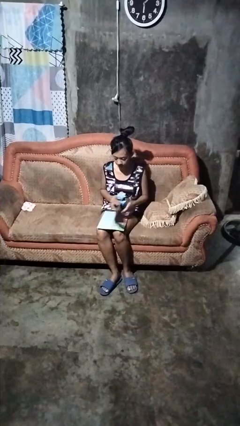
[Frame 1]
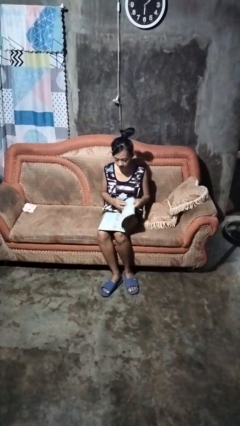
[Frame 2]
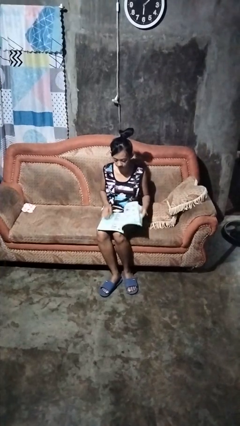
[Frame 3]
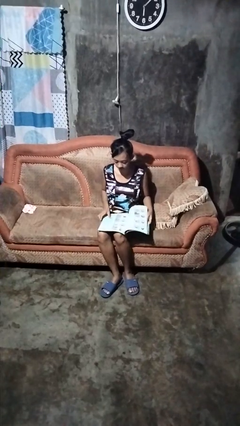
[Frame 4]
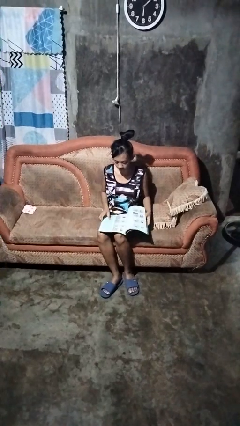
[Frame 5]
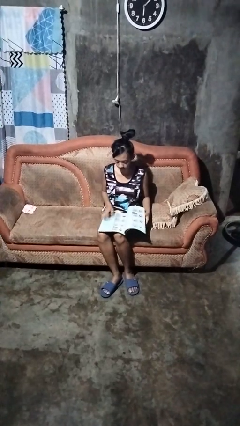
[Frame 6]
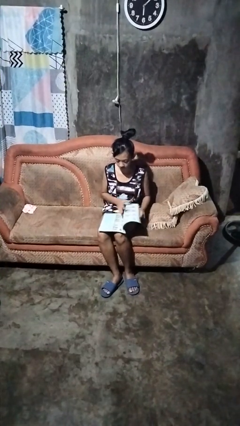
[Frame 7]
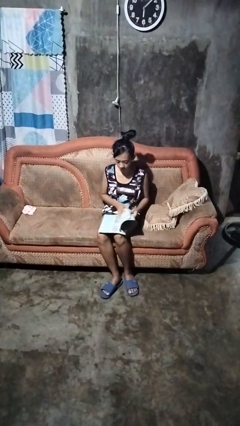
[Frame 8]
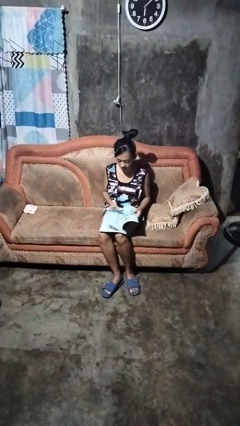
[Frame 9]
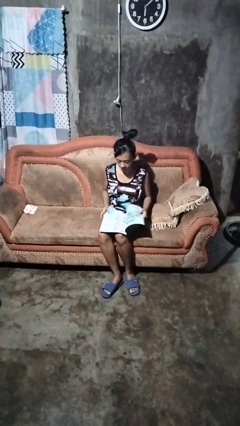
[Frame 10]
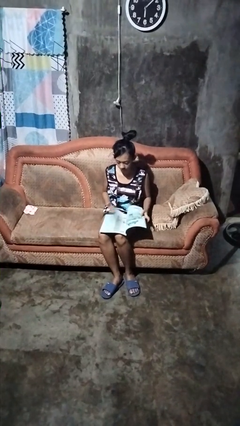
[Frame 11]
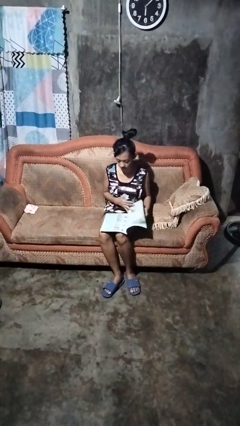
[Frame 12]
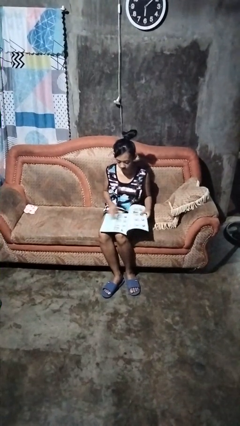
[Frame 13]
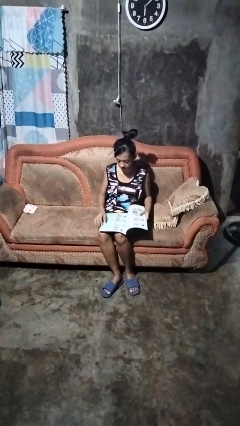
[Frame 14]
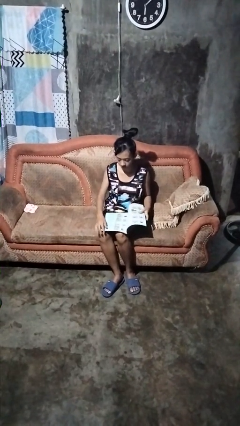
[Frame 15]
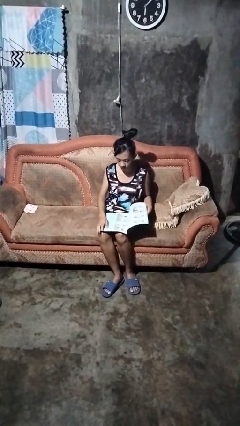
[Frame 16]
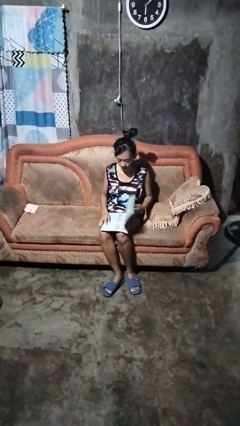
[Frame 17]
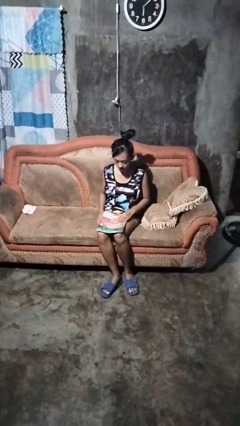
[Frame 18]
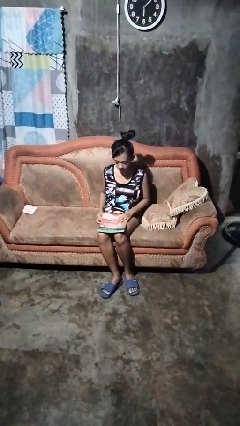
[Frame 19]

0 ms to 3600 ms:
person reads magazine

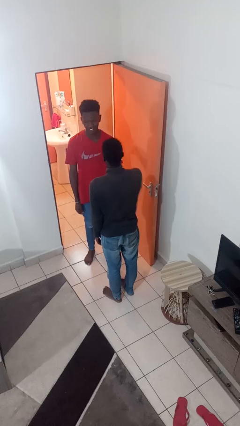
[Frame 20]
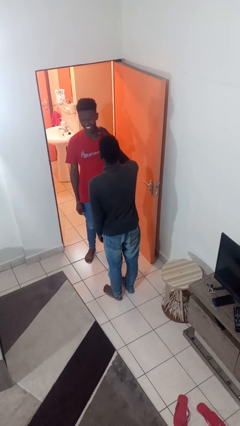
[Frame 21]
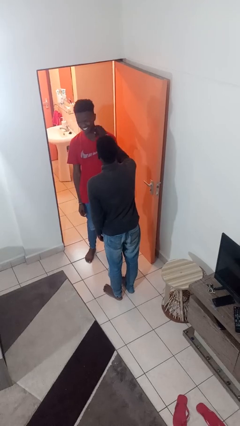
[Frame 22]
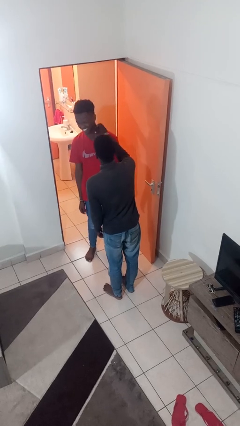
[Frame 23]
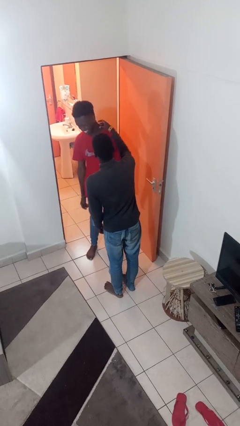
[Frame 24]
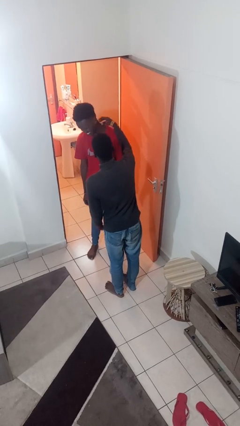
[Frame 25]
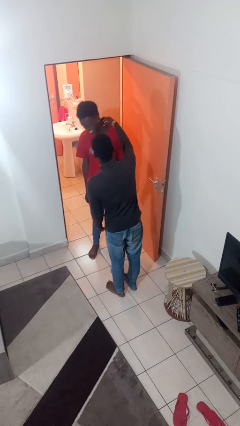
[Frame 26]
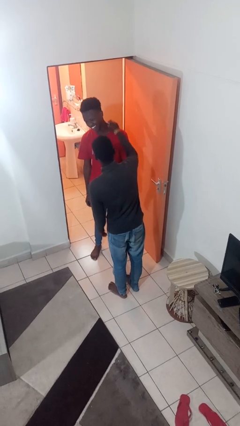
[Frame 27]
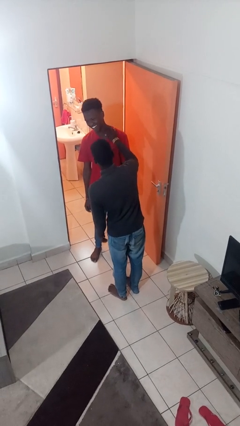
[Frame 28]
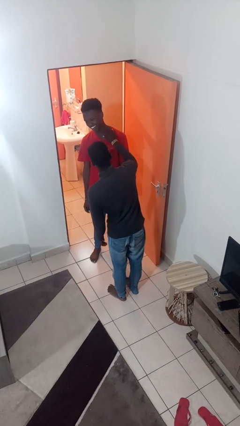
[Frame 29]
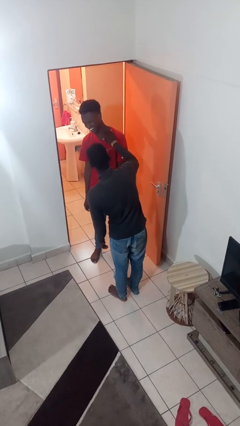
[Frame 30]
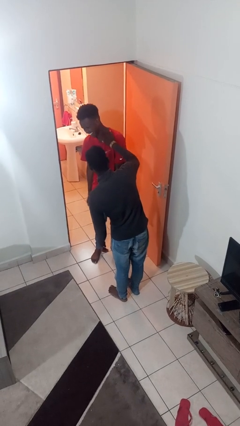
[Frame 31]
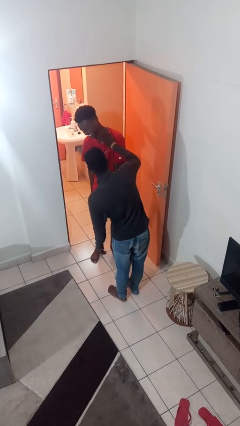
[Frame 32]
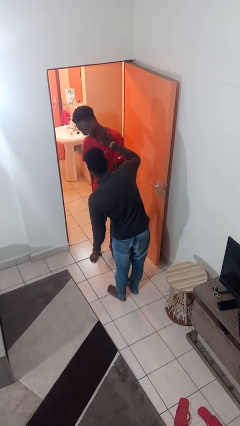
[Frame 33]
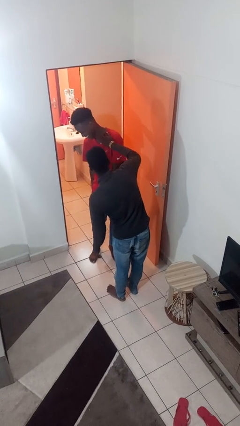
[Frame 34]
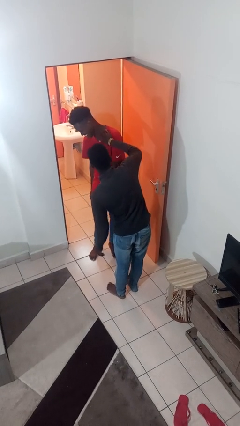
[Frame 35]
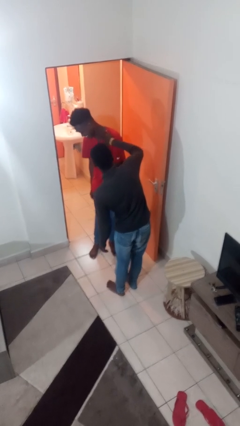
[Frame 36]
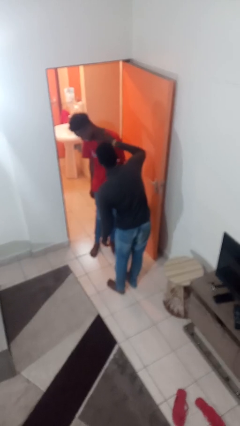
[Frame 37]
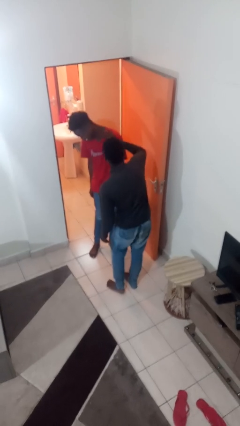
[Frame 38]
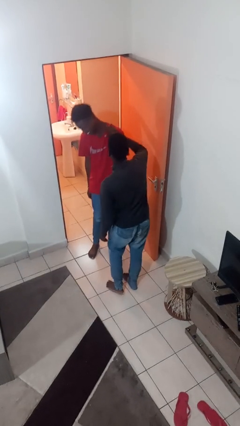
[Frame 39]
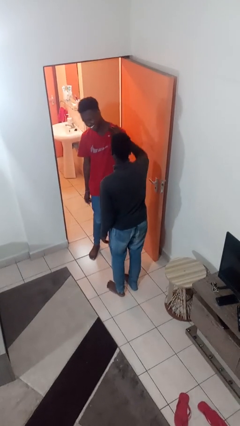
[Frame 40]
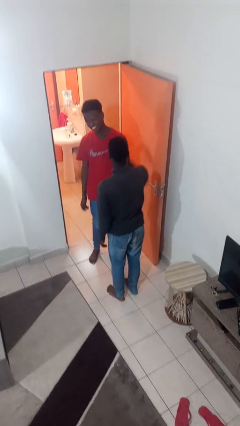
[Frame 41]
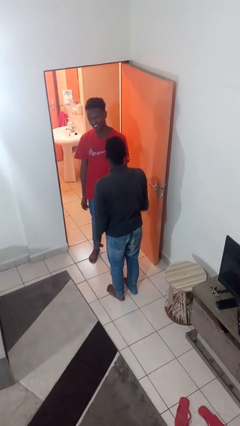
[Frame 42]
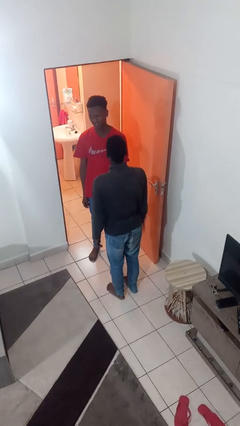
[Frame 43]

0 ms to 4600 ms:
person tickles person

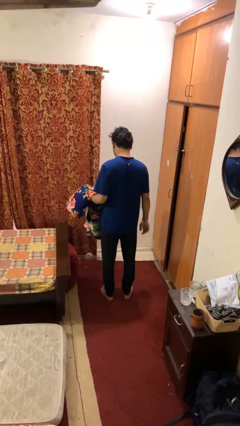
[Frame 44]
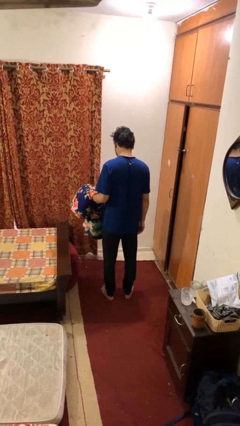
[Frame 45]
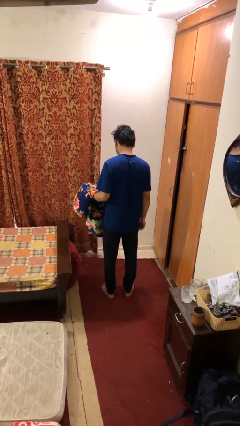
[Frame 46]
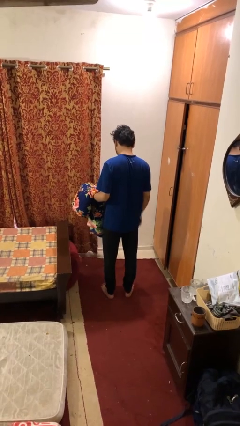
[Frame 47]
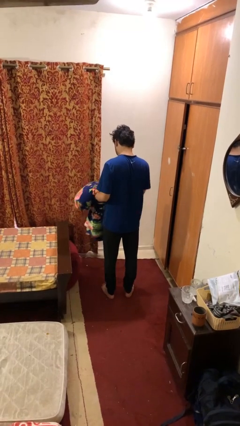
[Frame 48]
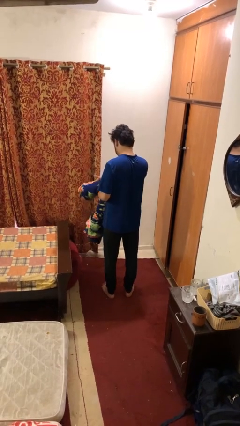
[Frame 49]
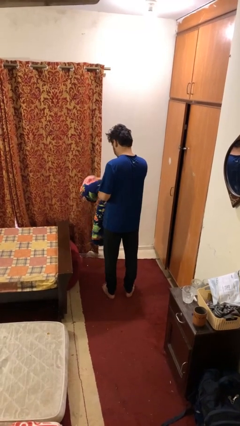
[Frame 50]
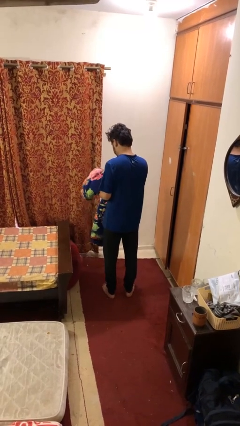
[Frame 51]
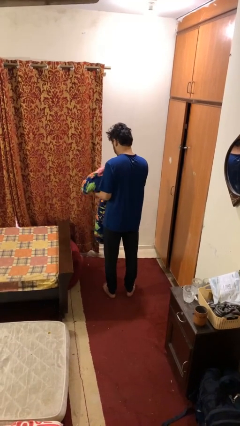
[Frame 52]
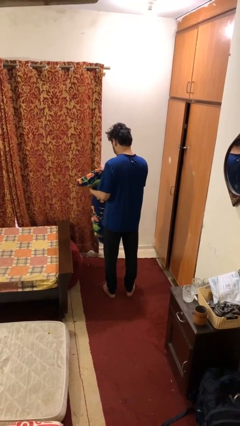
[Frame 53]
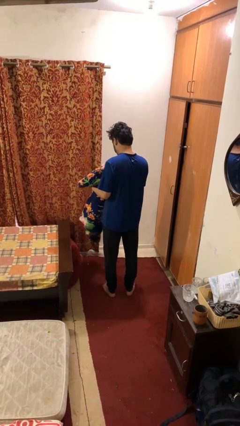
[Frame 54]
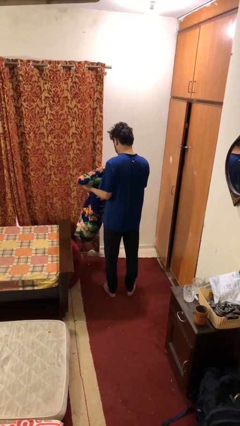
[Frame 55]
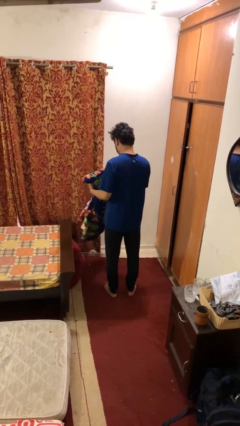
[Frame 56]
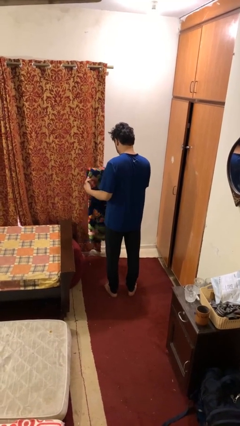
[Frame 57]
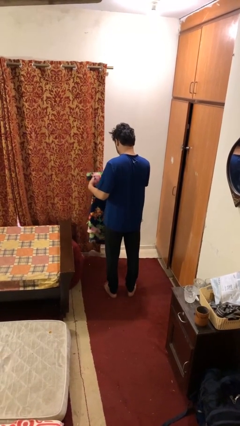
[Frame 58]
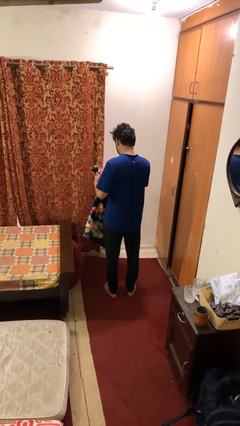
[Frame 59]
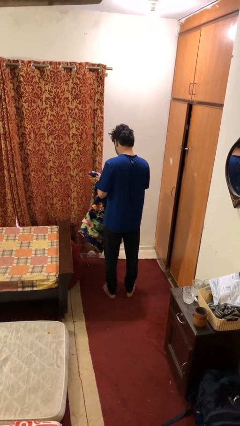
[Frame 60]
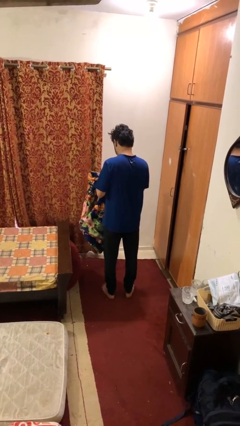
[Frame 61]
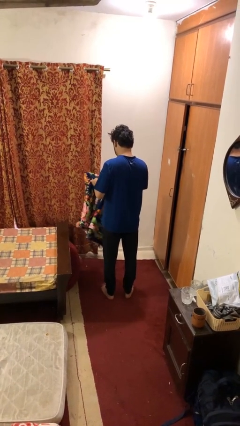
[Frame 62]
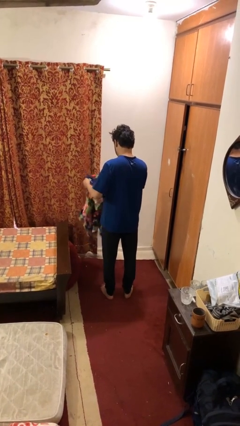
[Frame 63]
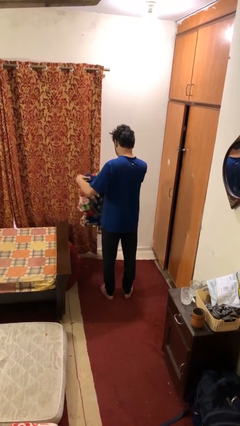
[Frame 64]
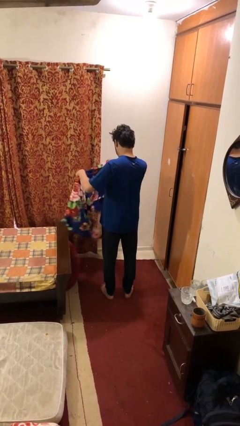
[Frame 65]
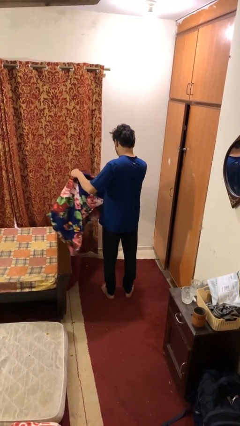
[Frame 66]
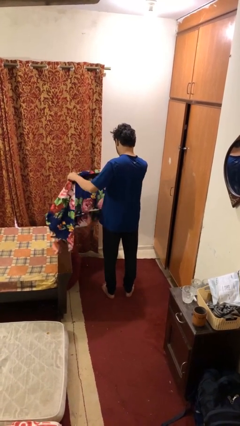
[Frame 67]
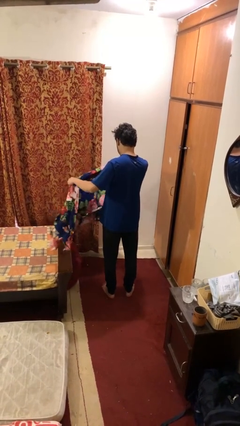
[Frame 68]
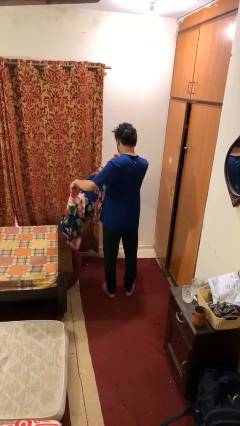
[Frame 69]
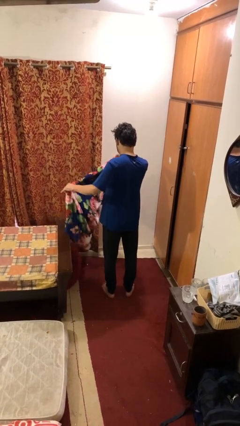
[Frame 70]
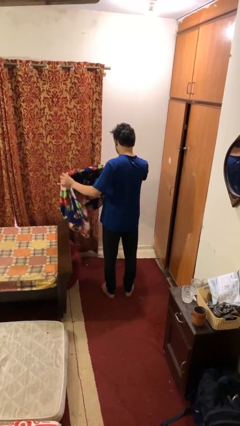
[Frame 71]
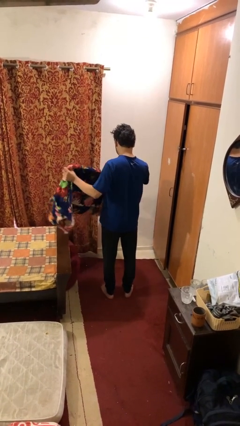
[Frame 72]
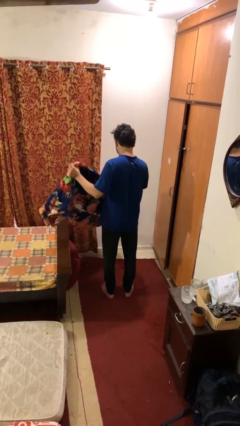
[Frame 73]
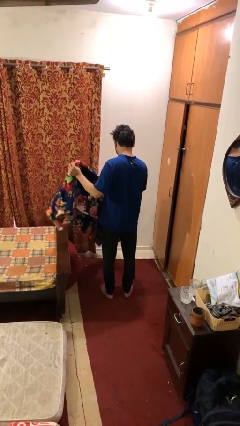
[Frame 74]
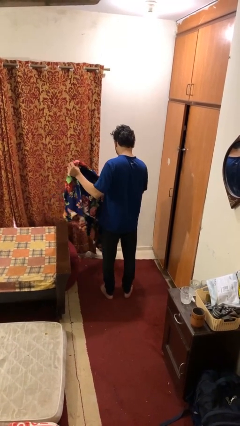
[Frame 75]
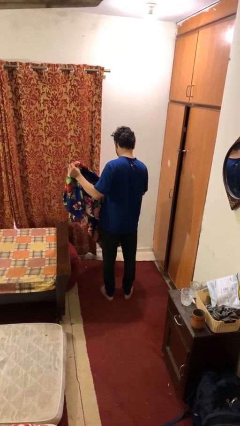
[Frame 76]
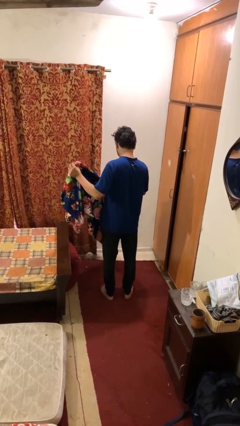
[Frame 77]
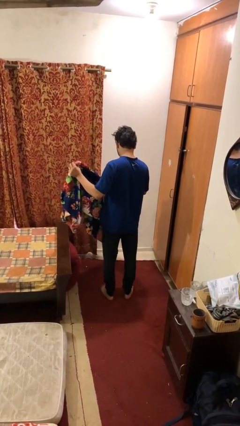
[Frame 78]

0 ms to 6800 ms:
person unfolds blanket

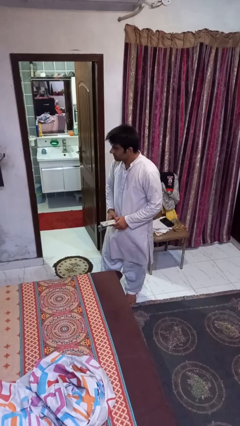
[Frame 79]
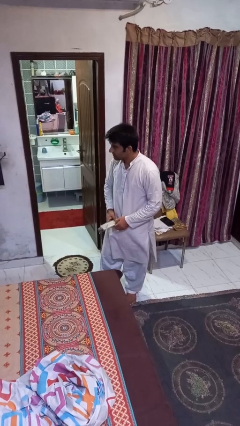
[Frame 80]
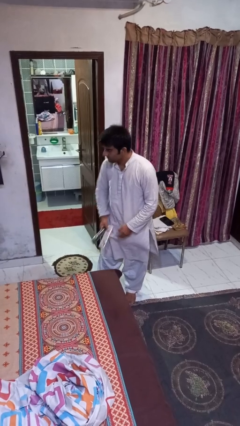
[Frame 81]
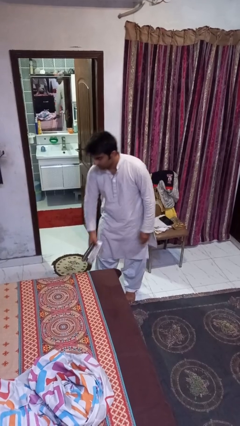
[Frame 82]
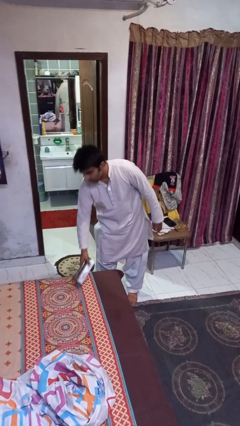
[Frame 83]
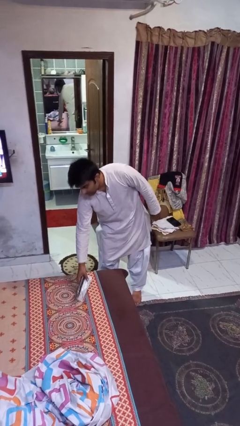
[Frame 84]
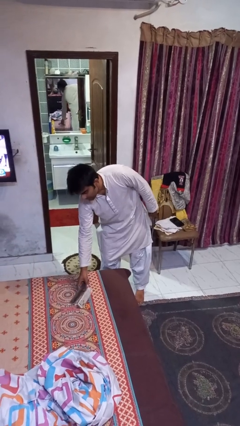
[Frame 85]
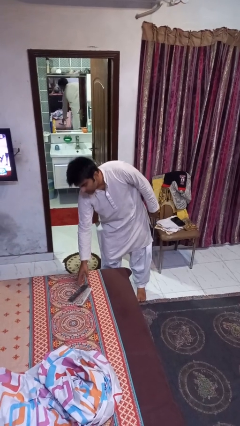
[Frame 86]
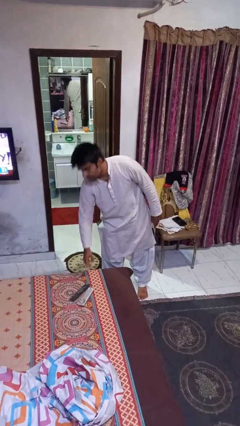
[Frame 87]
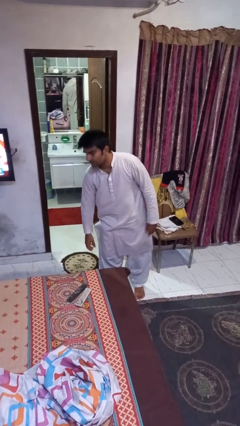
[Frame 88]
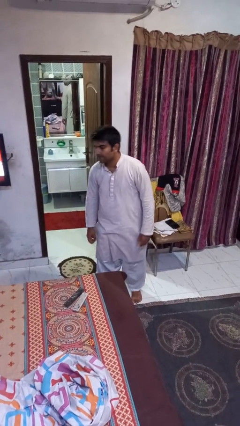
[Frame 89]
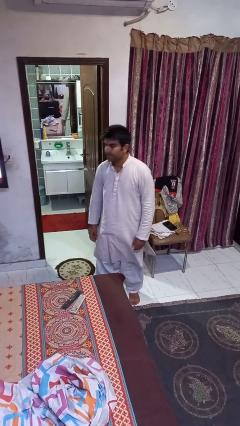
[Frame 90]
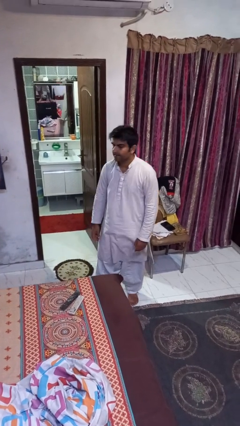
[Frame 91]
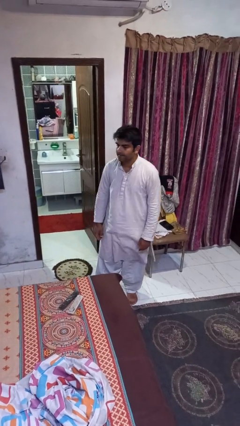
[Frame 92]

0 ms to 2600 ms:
person puts down object on bed
